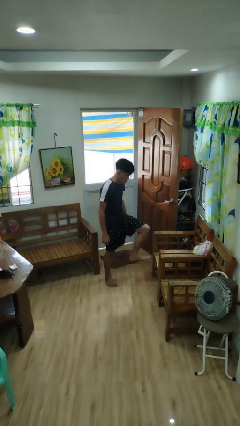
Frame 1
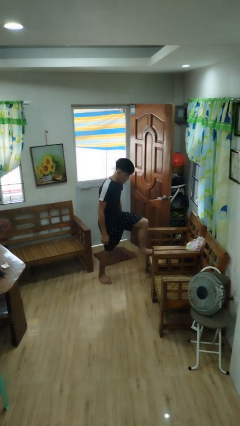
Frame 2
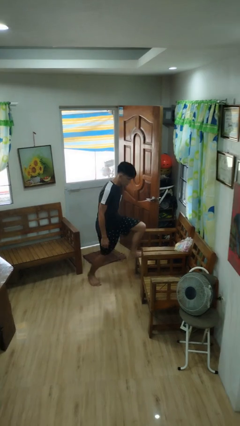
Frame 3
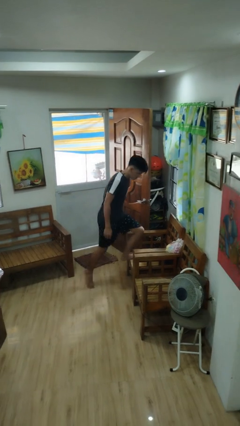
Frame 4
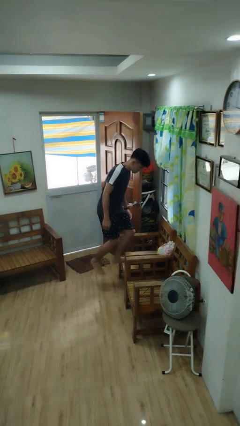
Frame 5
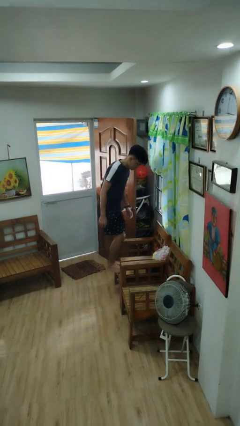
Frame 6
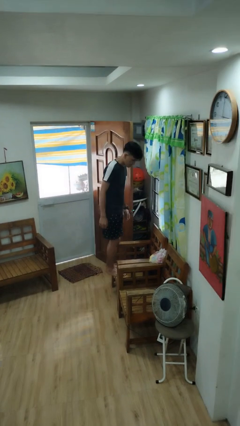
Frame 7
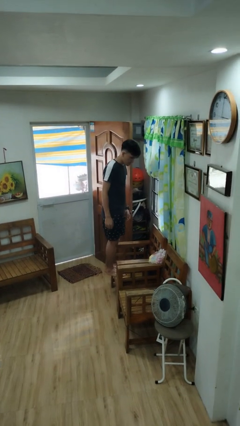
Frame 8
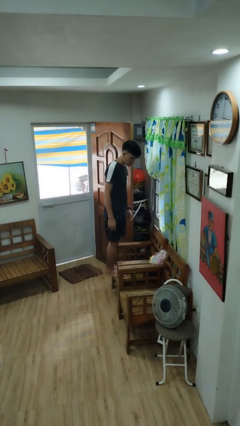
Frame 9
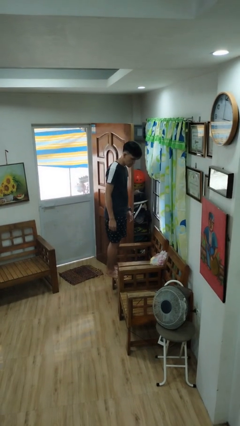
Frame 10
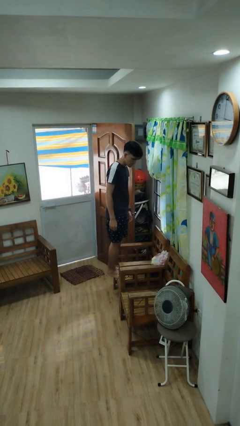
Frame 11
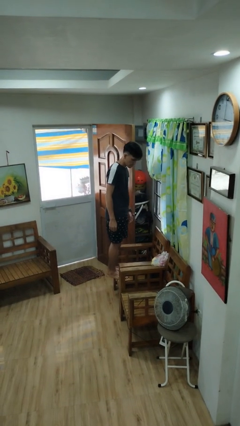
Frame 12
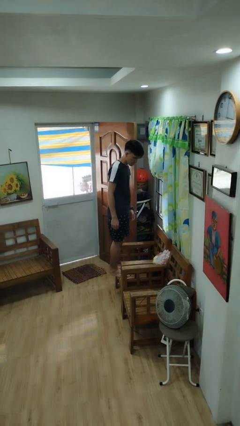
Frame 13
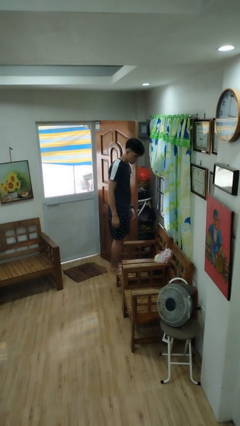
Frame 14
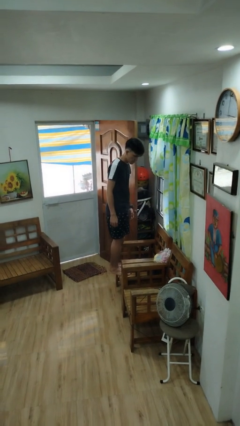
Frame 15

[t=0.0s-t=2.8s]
person climbs on chair

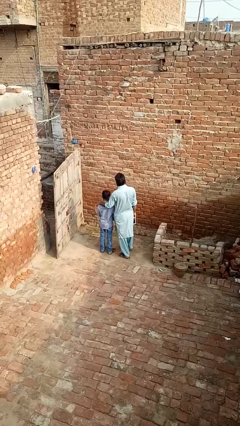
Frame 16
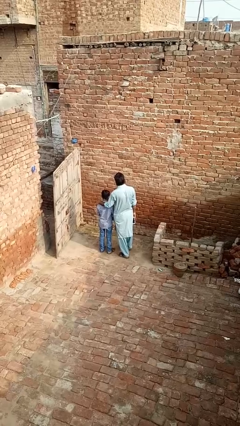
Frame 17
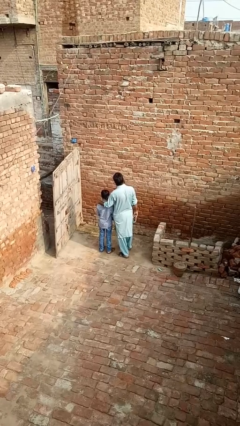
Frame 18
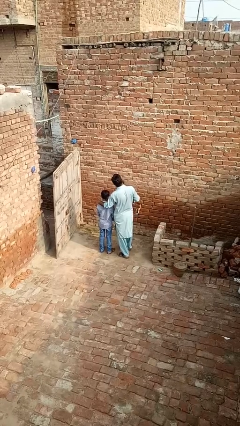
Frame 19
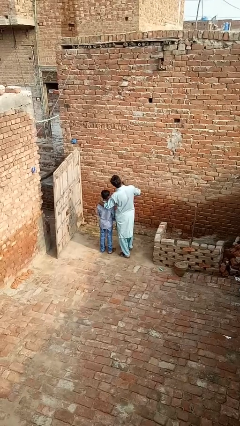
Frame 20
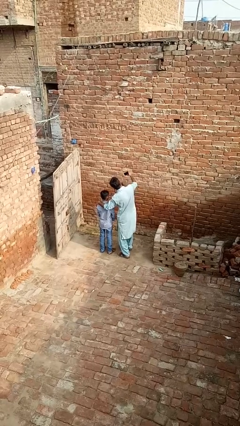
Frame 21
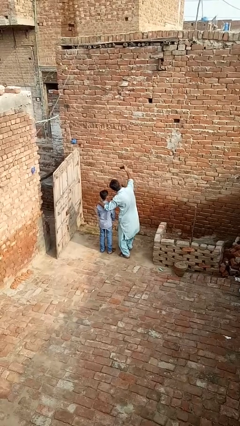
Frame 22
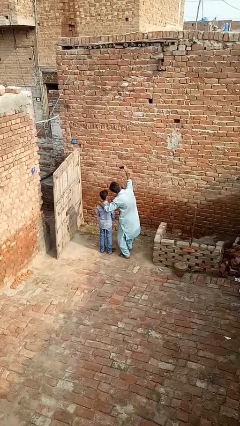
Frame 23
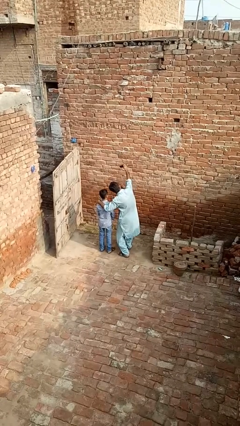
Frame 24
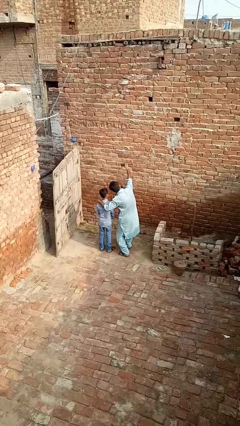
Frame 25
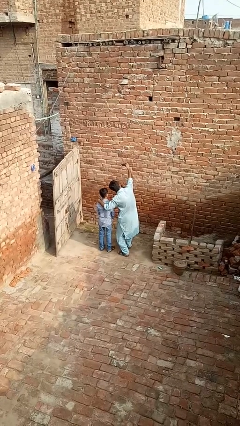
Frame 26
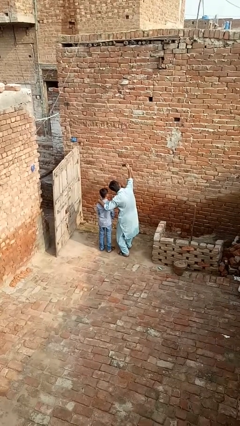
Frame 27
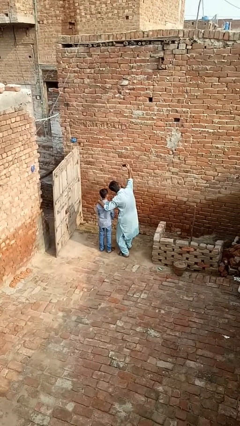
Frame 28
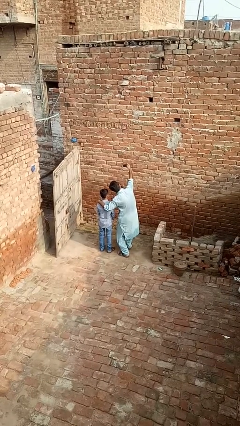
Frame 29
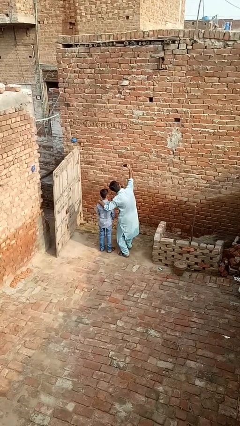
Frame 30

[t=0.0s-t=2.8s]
person takes selfie with person

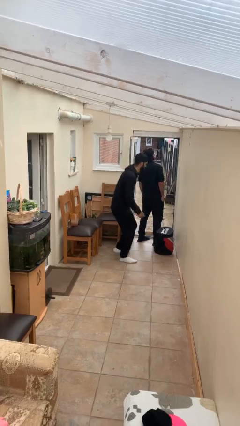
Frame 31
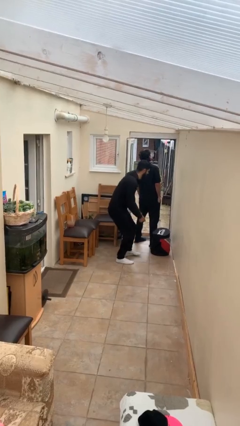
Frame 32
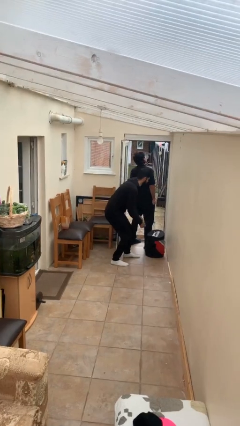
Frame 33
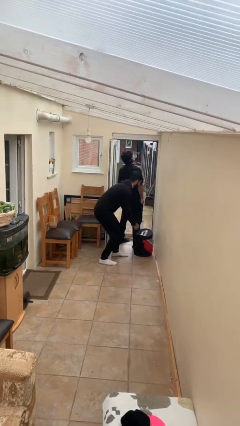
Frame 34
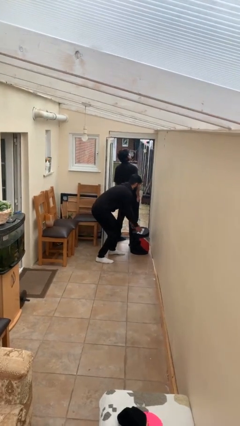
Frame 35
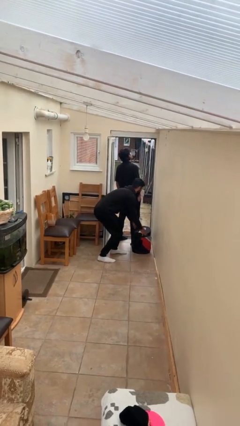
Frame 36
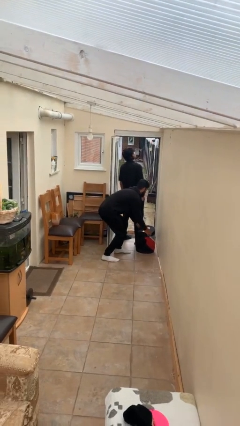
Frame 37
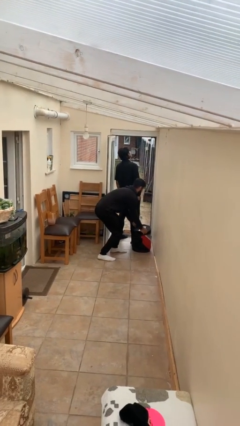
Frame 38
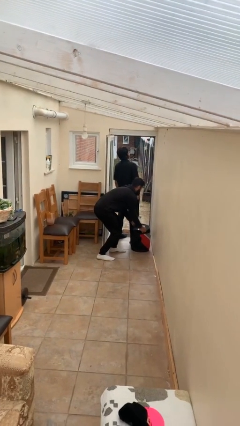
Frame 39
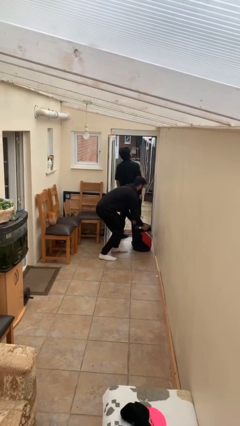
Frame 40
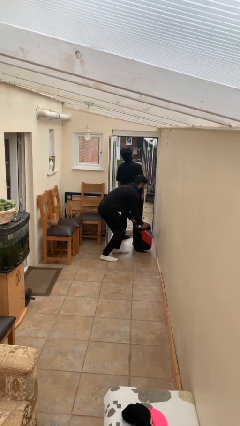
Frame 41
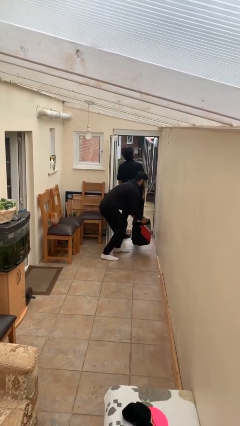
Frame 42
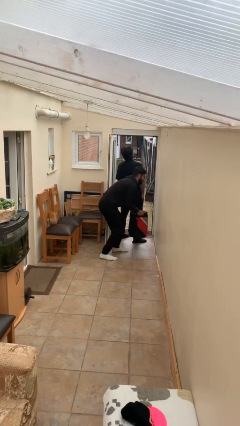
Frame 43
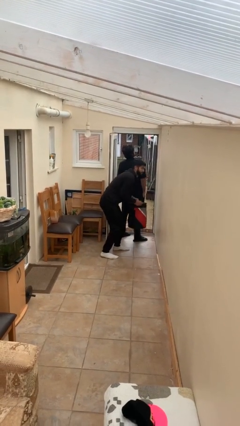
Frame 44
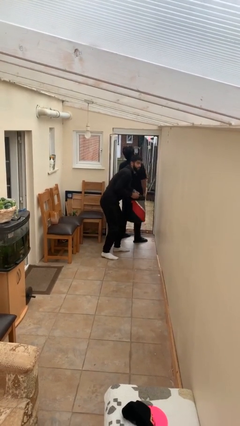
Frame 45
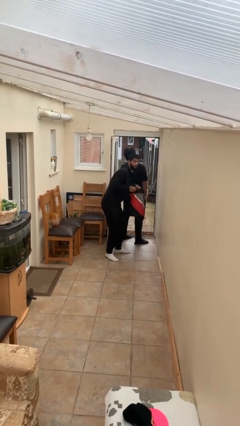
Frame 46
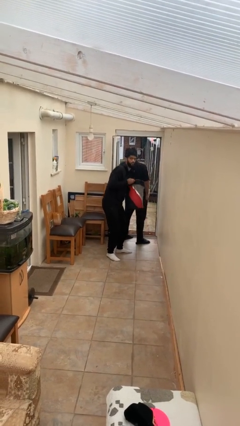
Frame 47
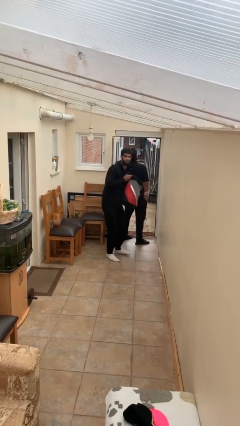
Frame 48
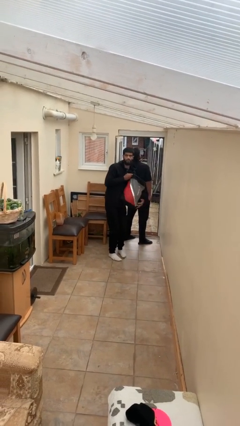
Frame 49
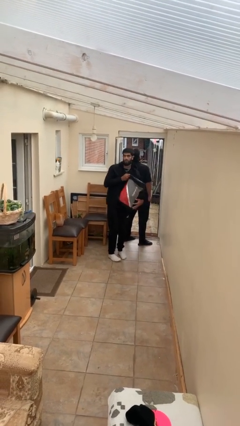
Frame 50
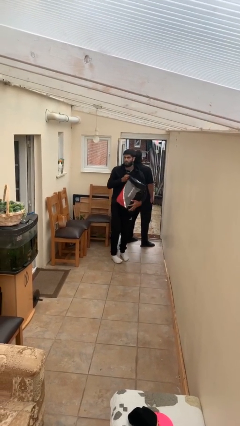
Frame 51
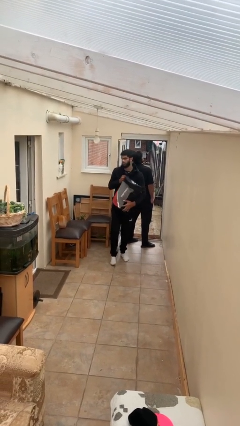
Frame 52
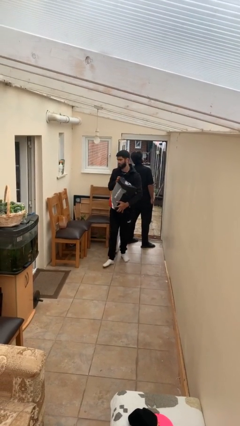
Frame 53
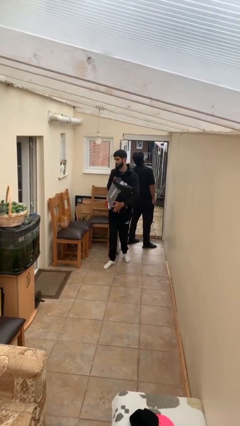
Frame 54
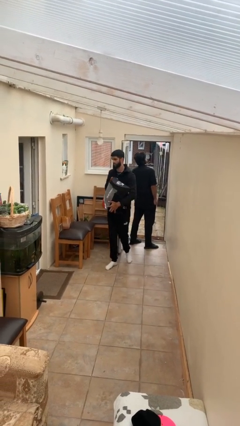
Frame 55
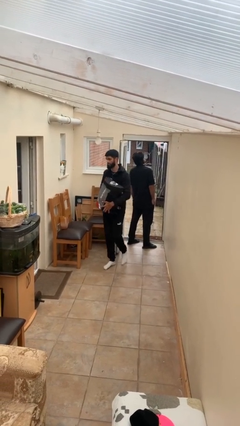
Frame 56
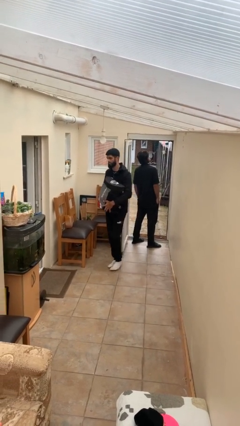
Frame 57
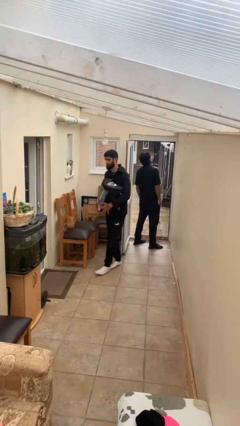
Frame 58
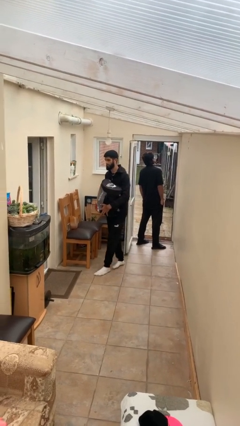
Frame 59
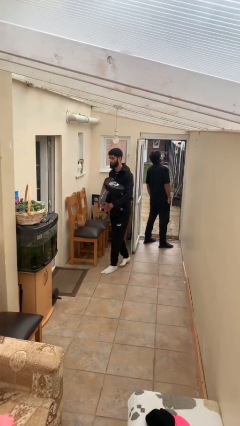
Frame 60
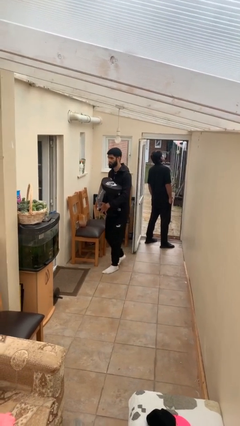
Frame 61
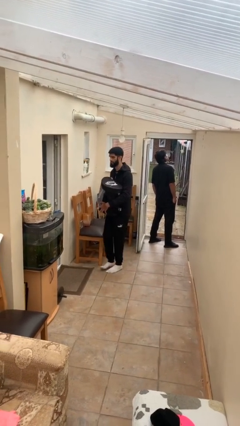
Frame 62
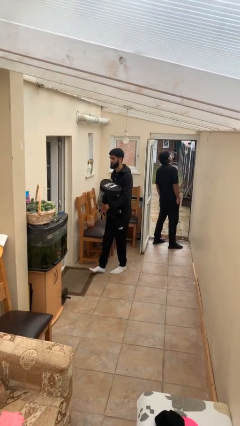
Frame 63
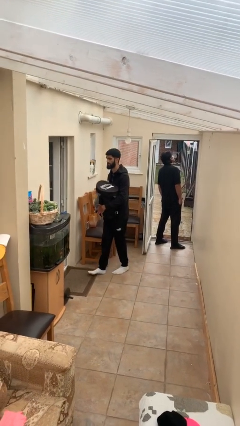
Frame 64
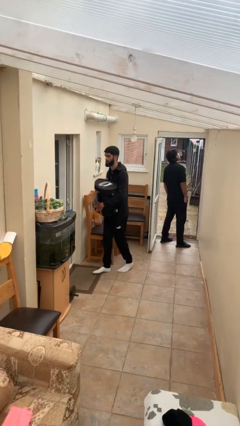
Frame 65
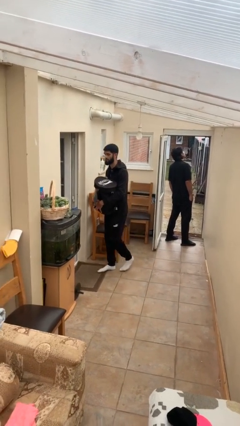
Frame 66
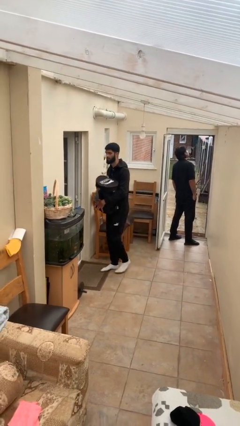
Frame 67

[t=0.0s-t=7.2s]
person steals object from person

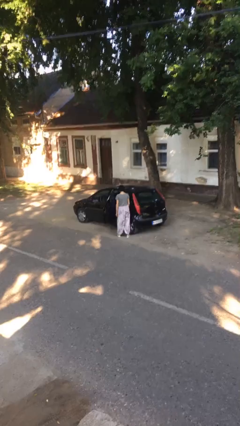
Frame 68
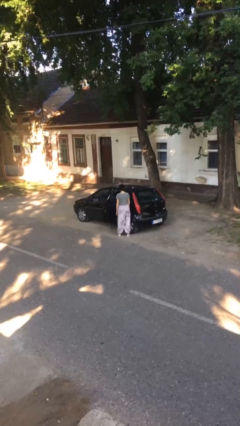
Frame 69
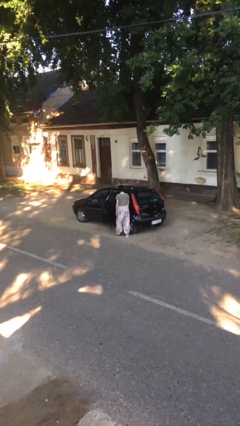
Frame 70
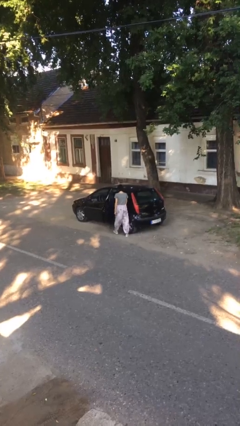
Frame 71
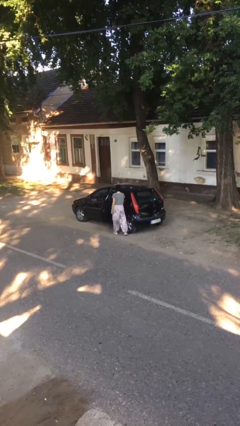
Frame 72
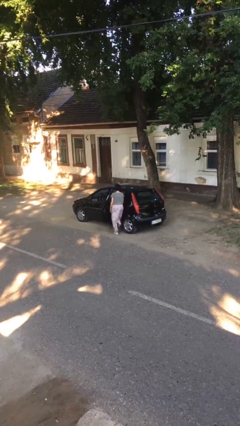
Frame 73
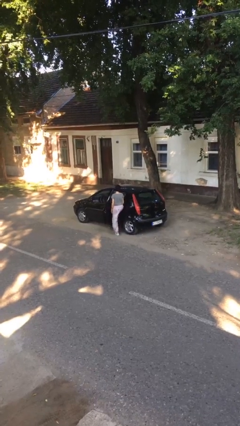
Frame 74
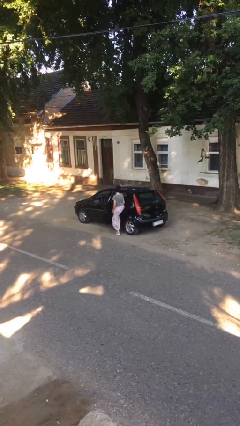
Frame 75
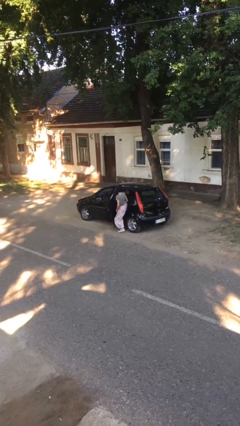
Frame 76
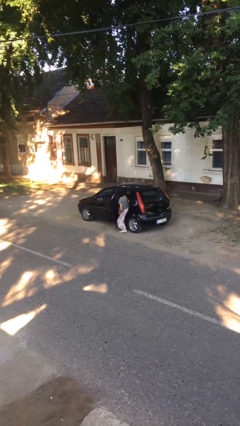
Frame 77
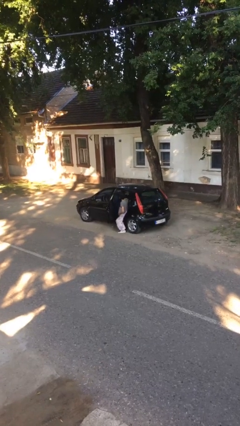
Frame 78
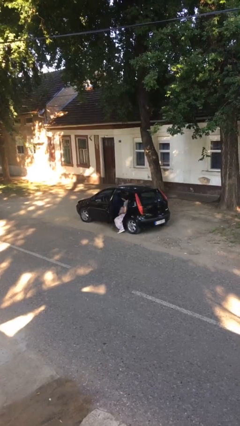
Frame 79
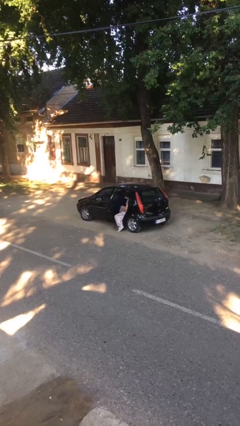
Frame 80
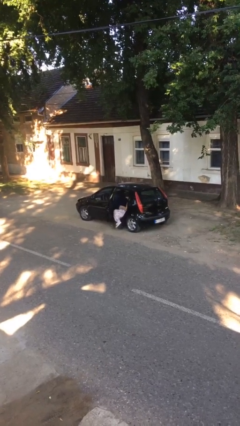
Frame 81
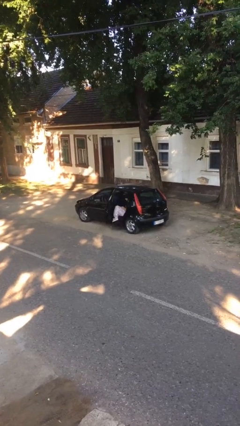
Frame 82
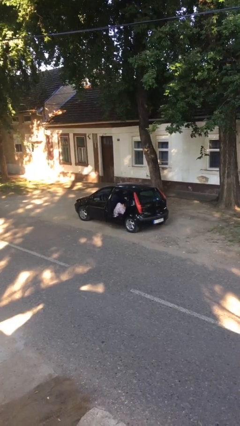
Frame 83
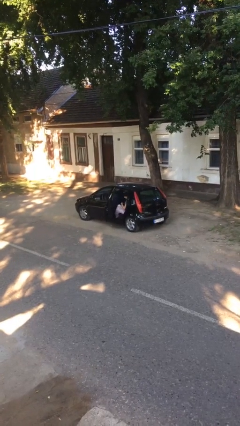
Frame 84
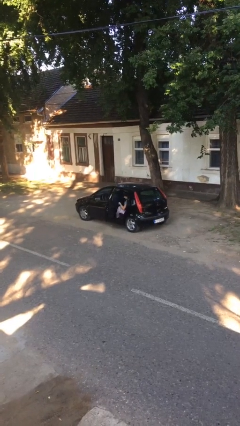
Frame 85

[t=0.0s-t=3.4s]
person enters car

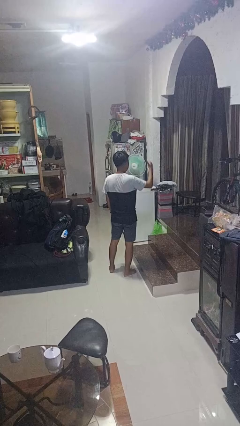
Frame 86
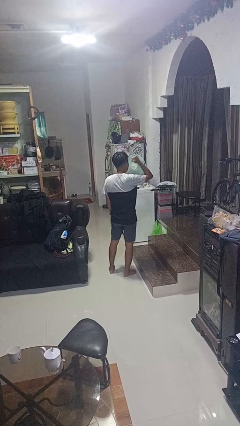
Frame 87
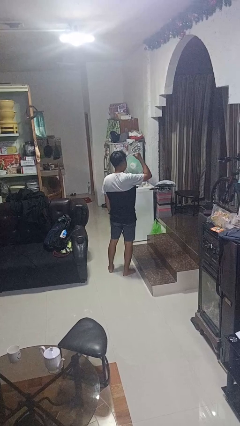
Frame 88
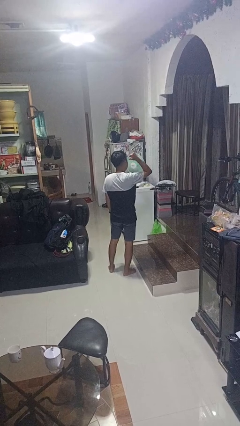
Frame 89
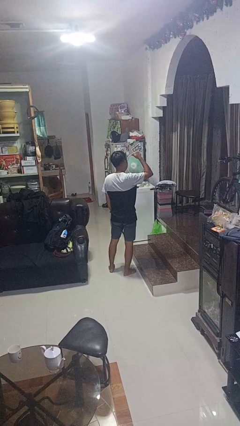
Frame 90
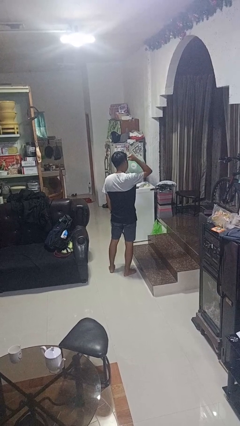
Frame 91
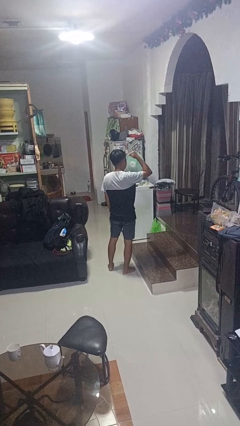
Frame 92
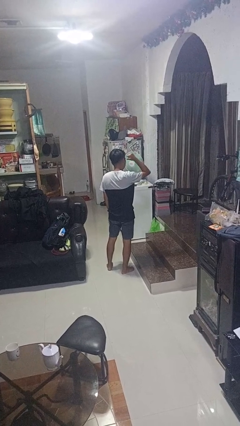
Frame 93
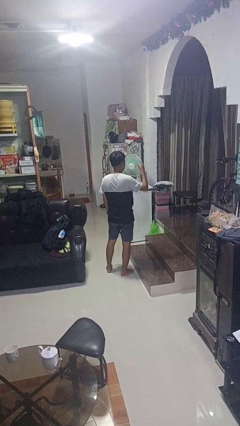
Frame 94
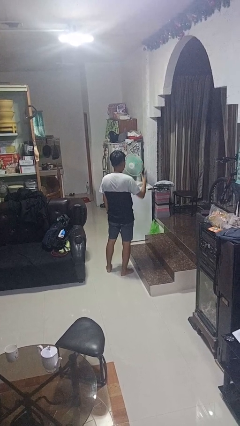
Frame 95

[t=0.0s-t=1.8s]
person gestures behind me
